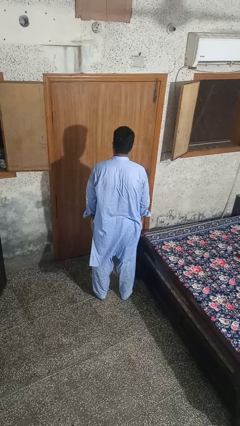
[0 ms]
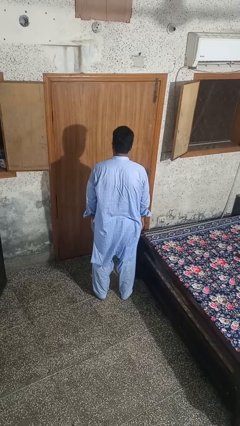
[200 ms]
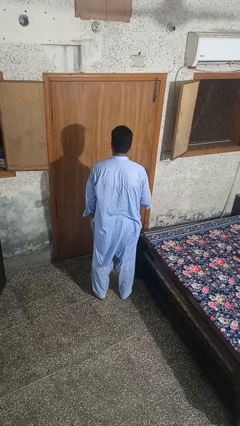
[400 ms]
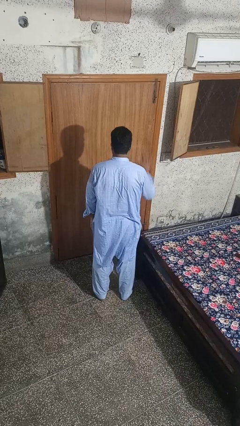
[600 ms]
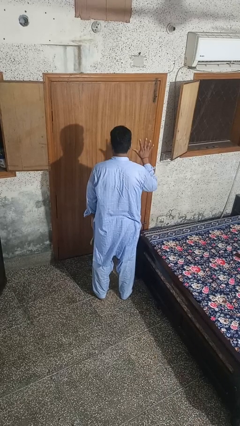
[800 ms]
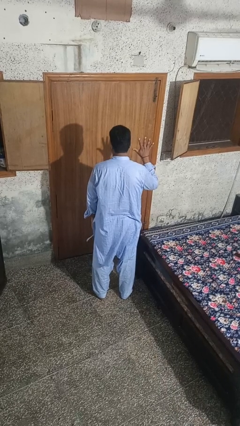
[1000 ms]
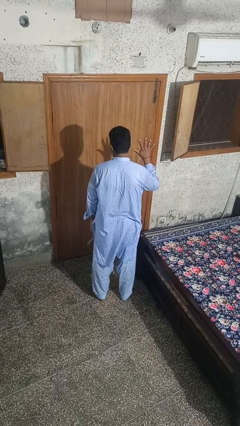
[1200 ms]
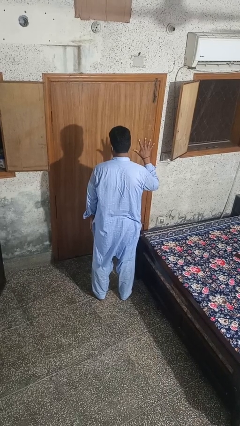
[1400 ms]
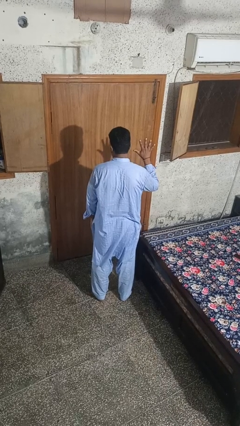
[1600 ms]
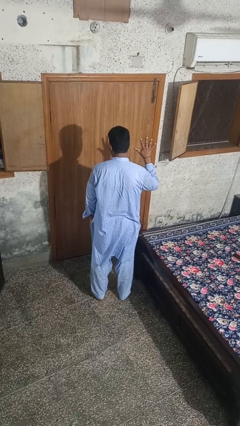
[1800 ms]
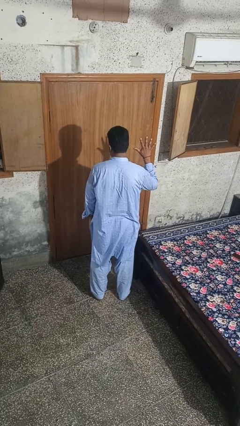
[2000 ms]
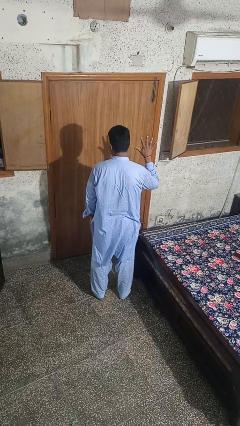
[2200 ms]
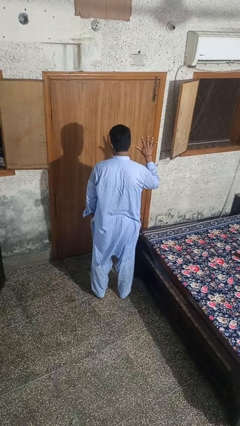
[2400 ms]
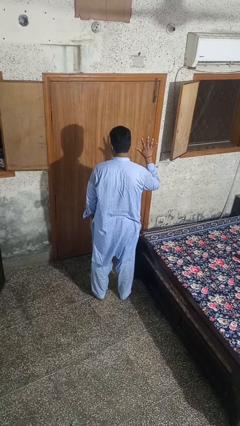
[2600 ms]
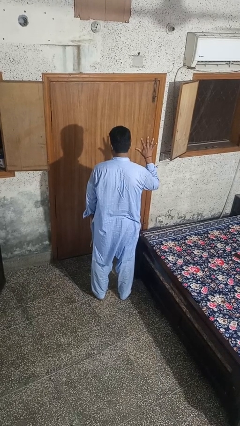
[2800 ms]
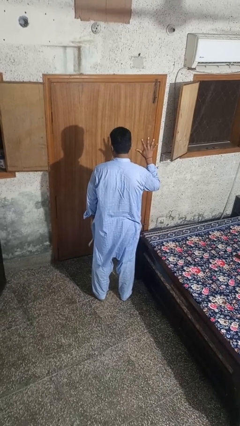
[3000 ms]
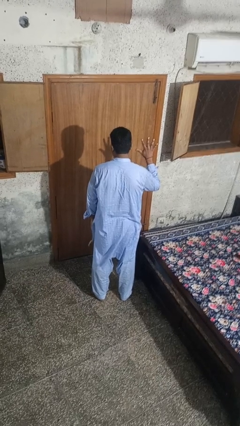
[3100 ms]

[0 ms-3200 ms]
person gestures number five

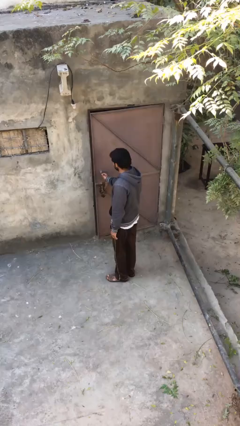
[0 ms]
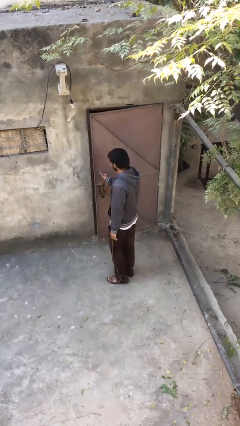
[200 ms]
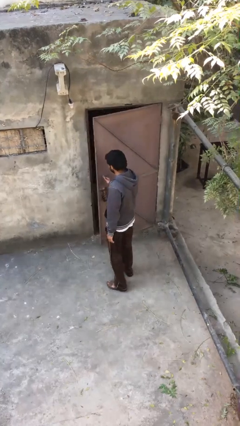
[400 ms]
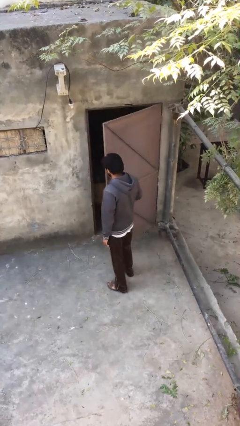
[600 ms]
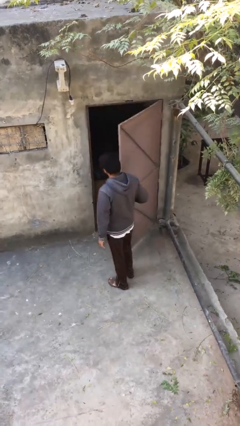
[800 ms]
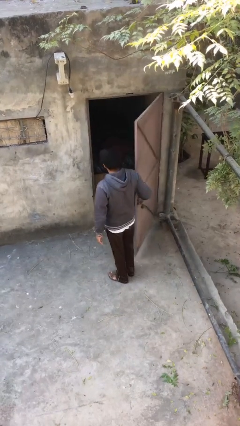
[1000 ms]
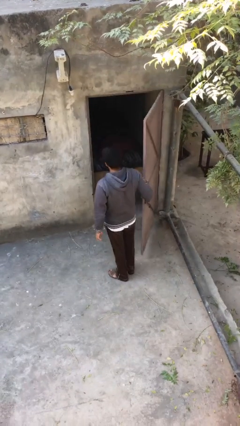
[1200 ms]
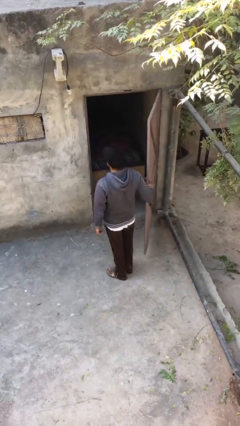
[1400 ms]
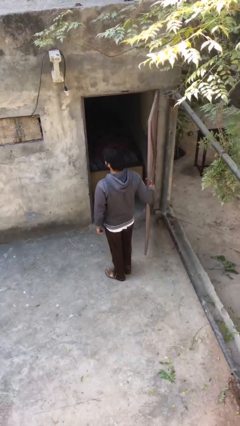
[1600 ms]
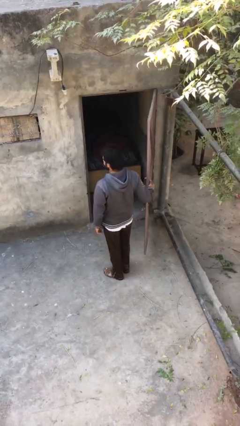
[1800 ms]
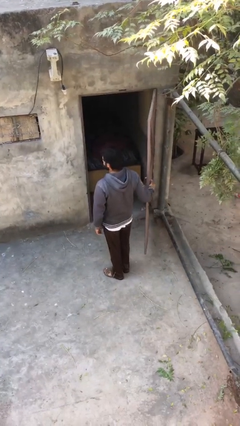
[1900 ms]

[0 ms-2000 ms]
person opens facility door

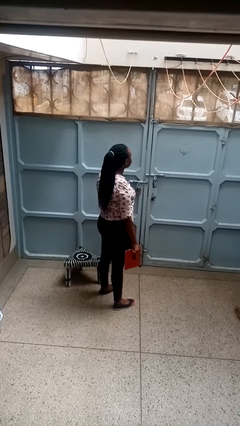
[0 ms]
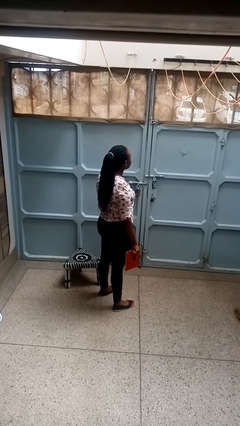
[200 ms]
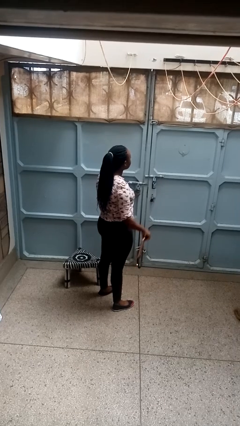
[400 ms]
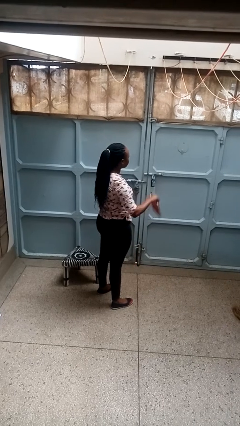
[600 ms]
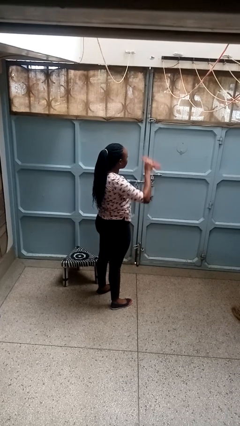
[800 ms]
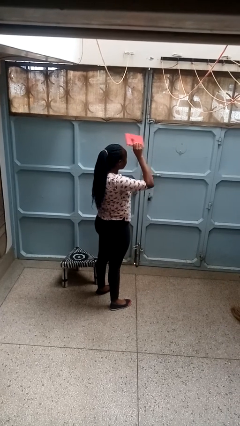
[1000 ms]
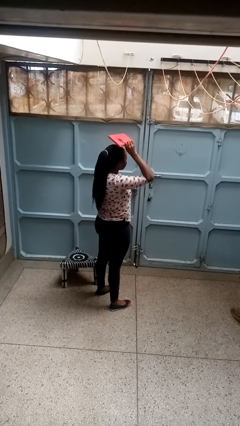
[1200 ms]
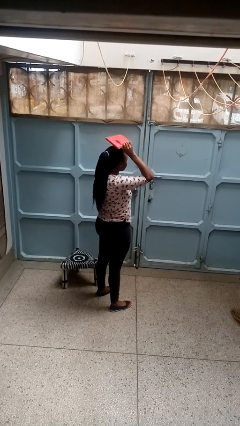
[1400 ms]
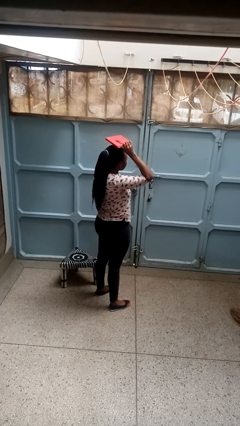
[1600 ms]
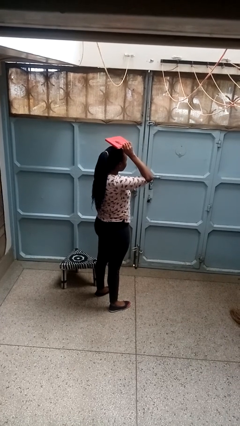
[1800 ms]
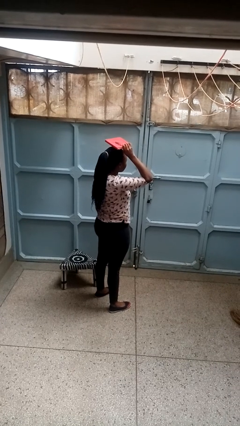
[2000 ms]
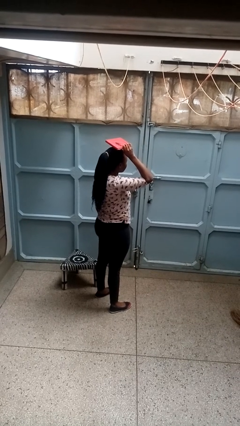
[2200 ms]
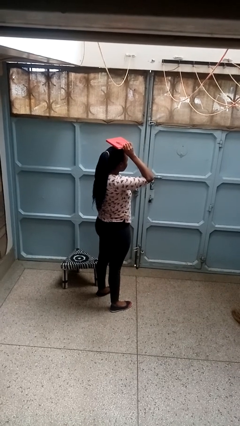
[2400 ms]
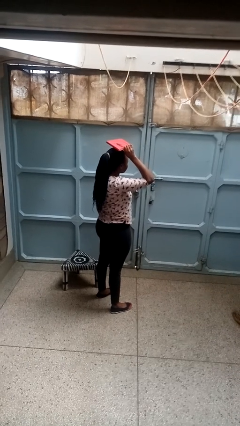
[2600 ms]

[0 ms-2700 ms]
person holds object above head

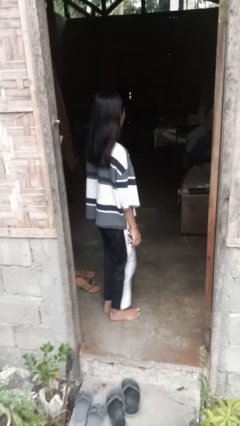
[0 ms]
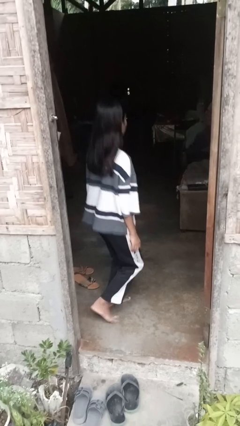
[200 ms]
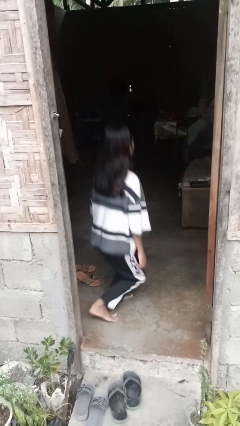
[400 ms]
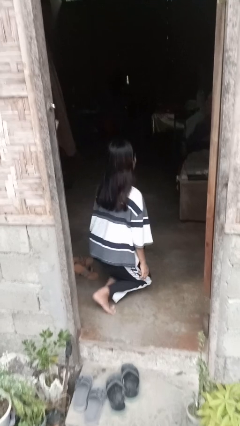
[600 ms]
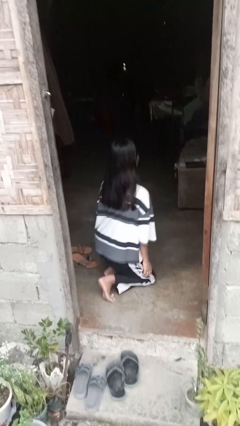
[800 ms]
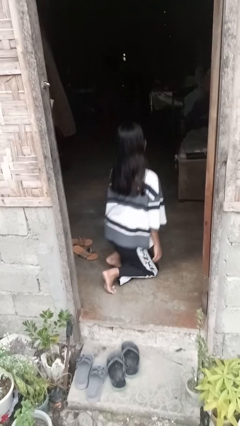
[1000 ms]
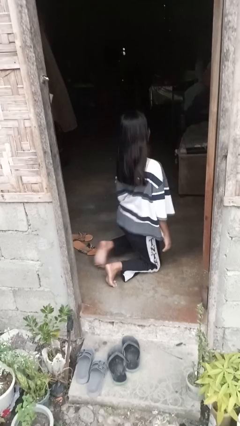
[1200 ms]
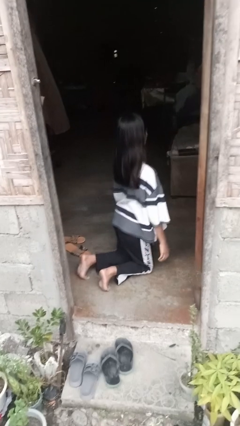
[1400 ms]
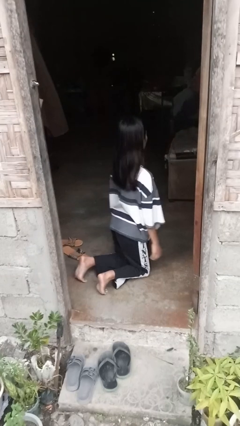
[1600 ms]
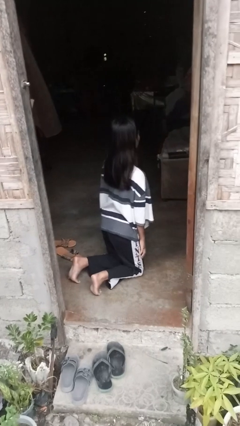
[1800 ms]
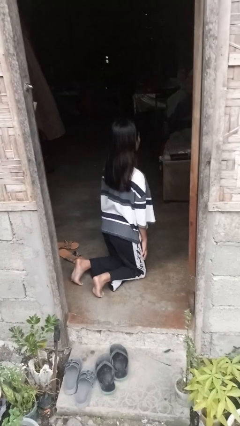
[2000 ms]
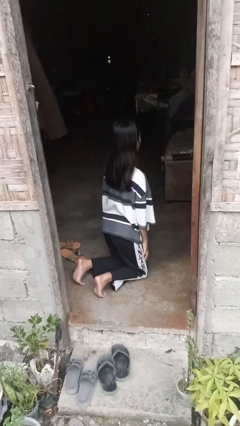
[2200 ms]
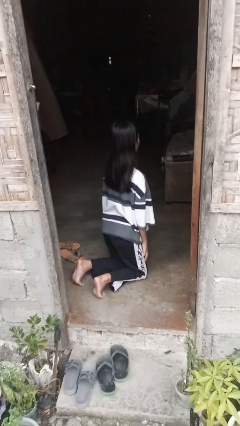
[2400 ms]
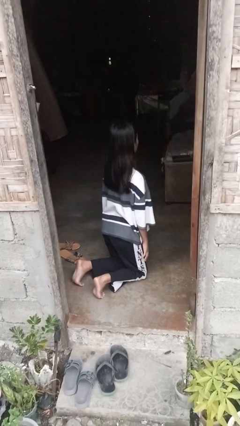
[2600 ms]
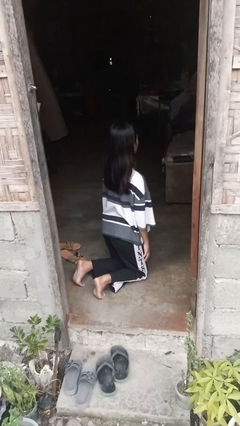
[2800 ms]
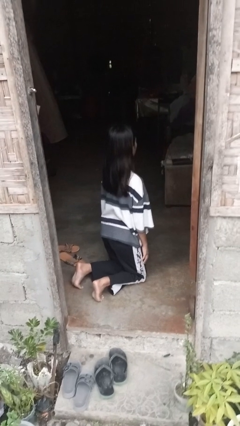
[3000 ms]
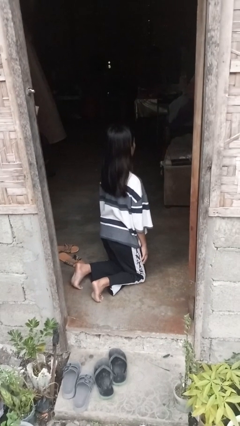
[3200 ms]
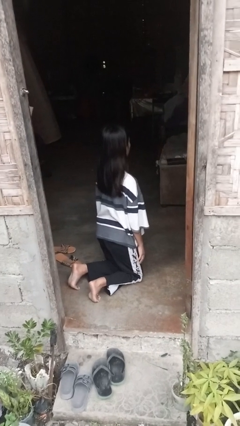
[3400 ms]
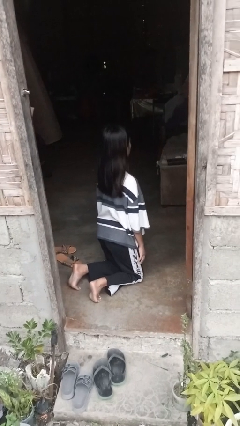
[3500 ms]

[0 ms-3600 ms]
person kneels

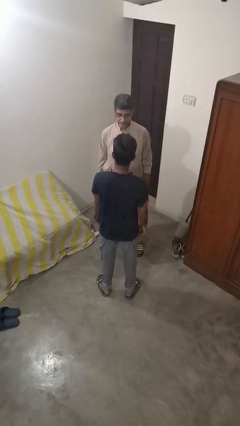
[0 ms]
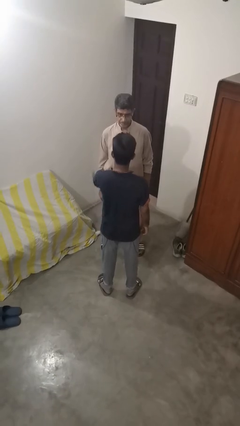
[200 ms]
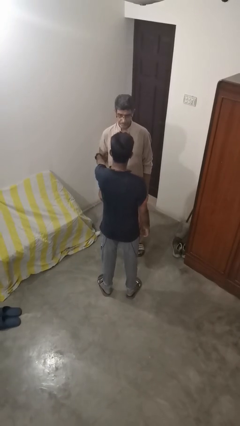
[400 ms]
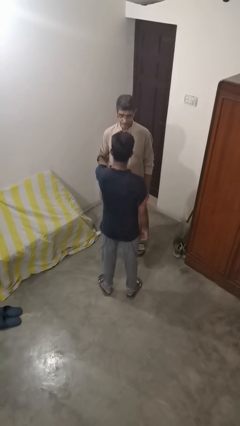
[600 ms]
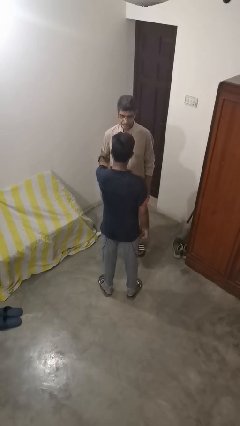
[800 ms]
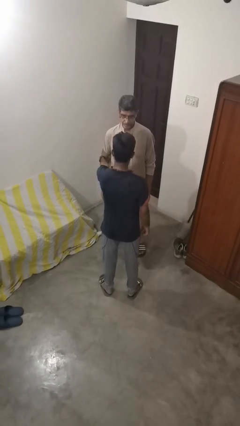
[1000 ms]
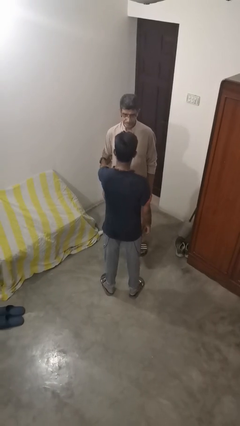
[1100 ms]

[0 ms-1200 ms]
person grabs person by bicep

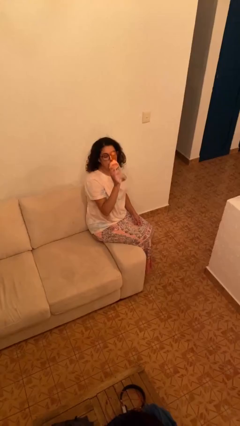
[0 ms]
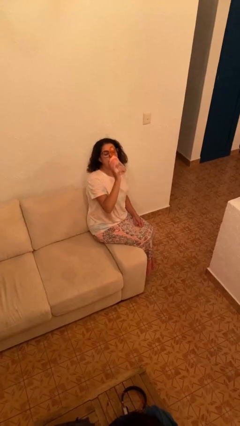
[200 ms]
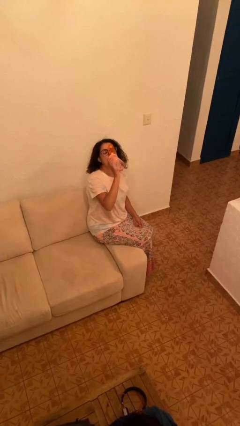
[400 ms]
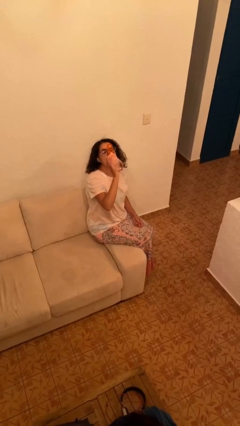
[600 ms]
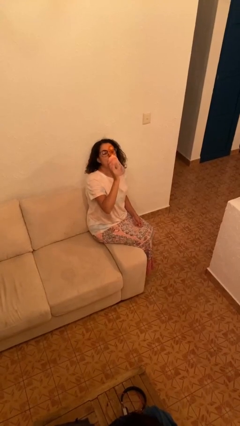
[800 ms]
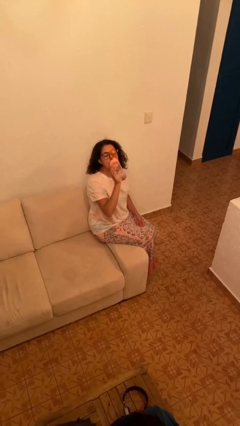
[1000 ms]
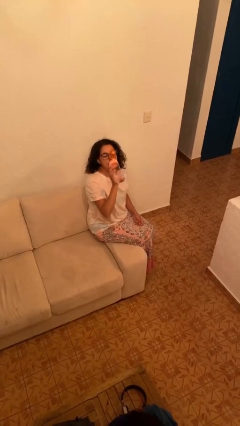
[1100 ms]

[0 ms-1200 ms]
person drinks from bottle

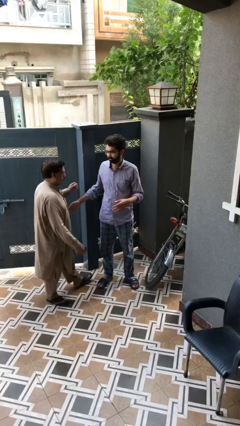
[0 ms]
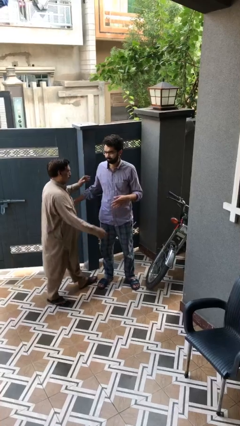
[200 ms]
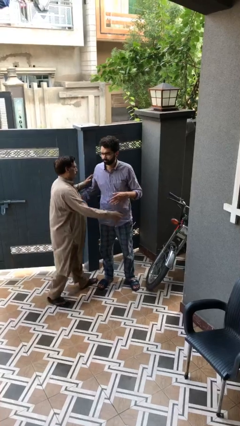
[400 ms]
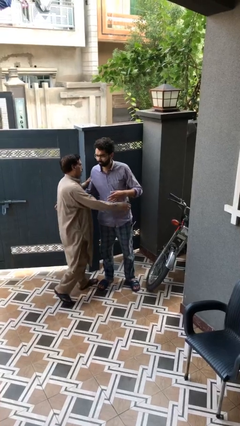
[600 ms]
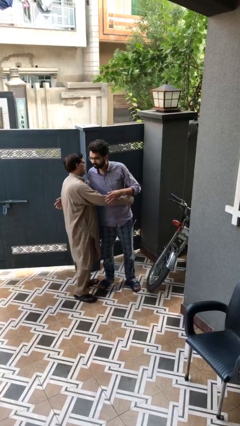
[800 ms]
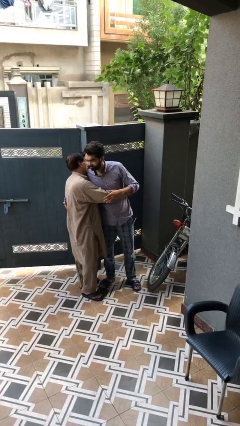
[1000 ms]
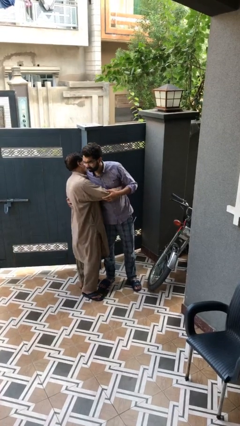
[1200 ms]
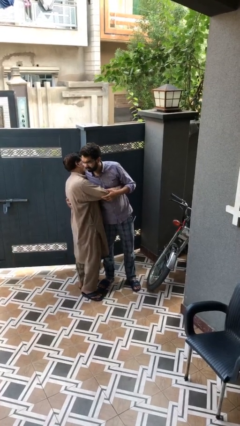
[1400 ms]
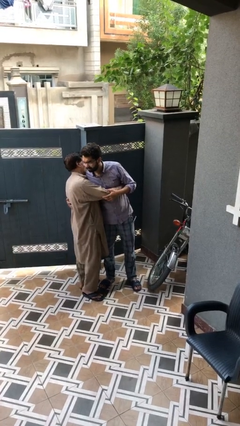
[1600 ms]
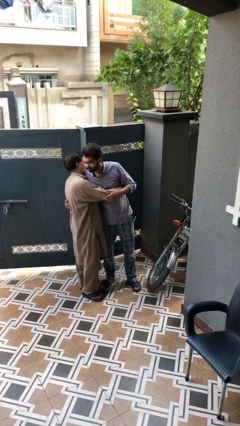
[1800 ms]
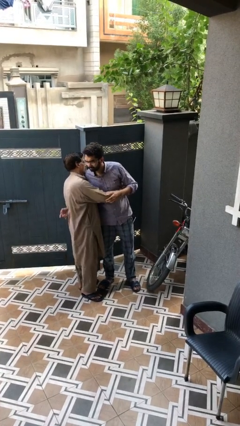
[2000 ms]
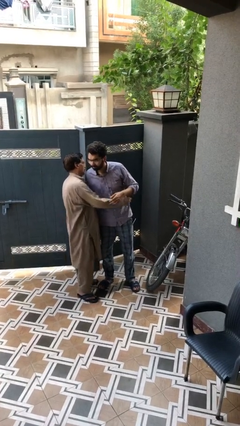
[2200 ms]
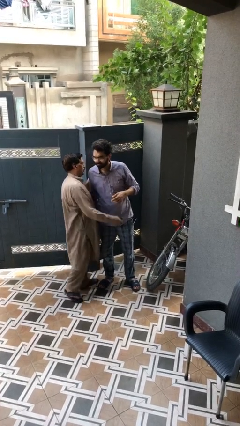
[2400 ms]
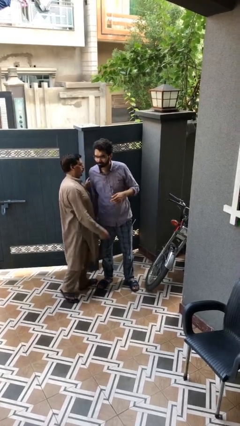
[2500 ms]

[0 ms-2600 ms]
person embraces person

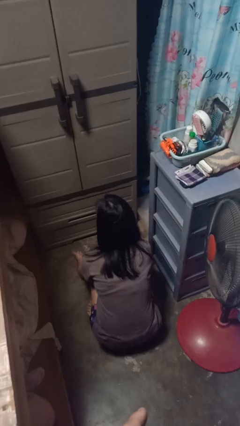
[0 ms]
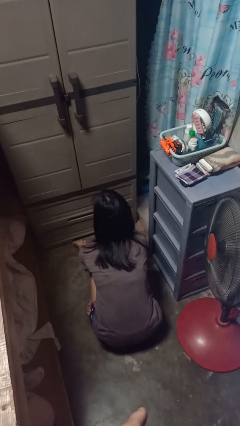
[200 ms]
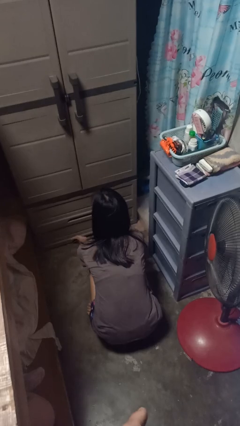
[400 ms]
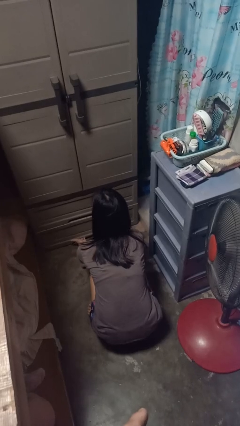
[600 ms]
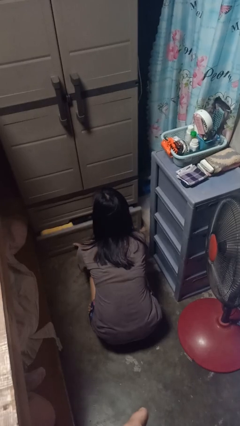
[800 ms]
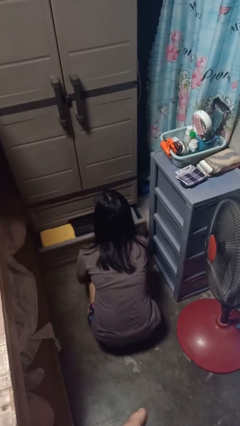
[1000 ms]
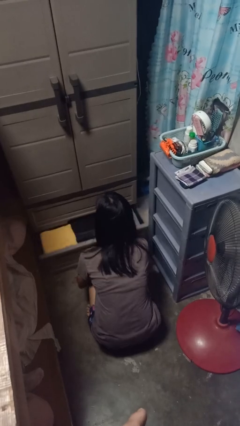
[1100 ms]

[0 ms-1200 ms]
person opens dresser drawer
